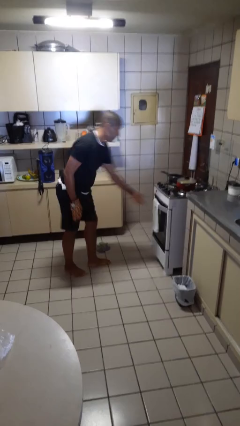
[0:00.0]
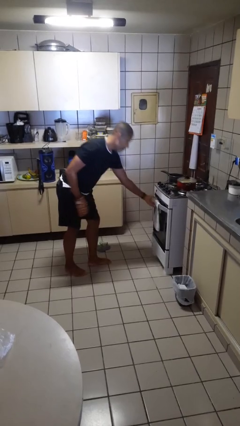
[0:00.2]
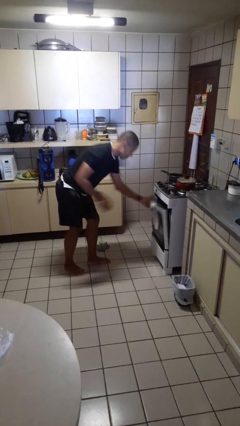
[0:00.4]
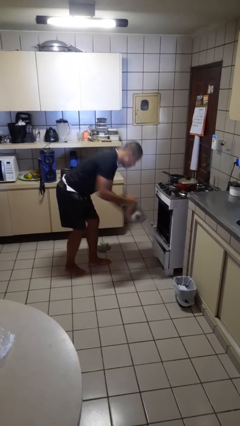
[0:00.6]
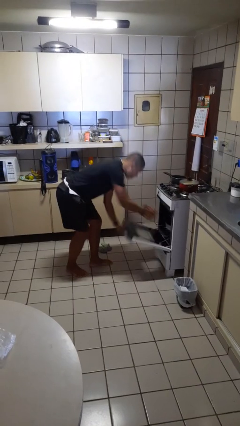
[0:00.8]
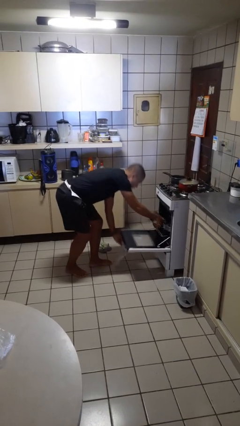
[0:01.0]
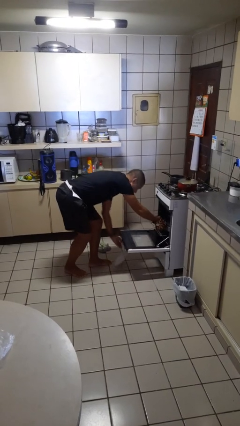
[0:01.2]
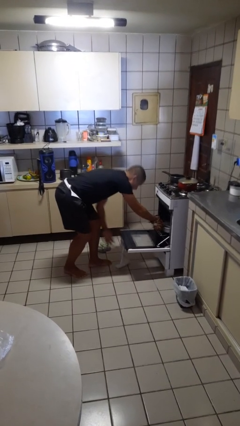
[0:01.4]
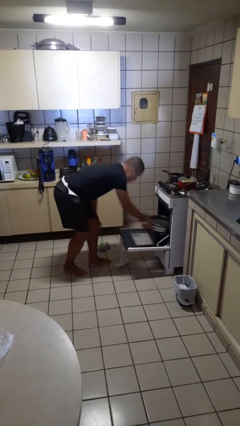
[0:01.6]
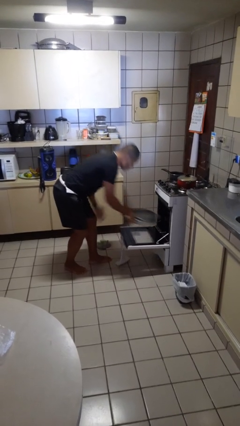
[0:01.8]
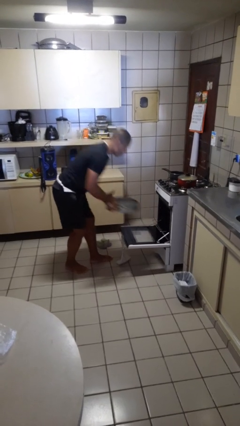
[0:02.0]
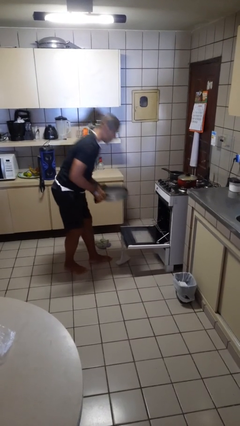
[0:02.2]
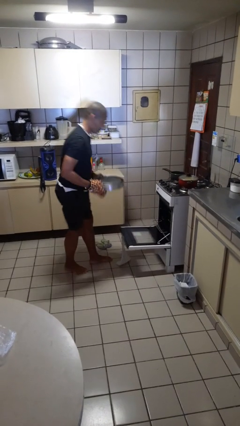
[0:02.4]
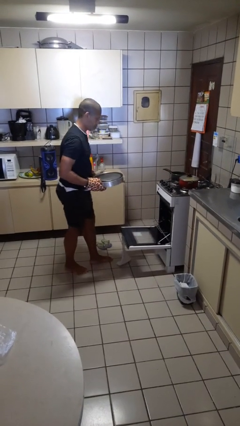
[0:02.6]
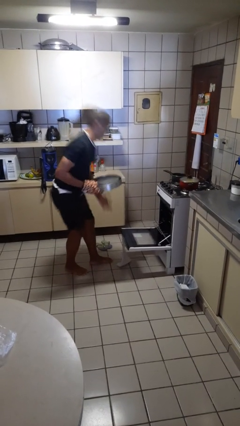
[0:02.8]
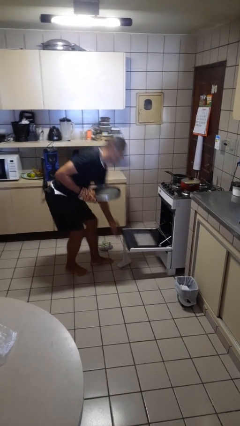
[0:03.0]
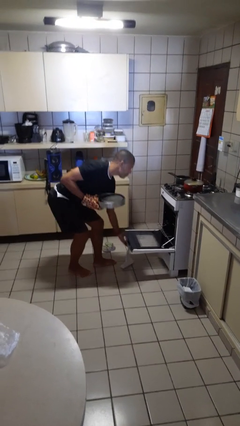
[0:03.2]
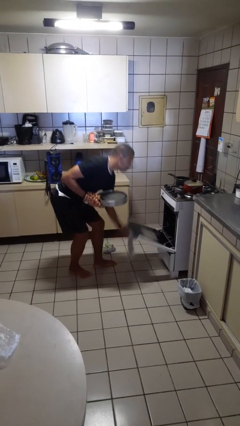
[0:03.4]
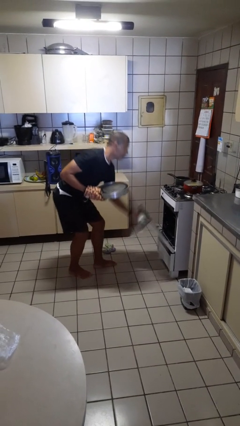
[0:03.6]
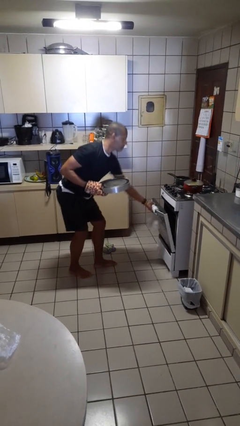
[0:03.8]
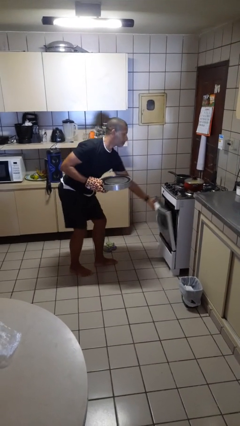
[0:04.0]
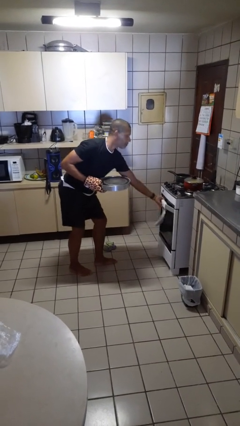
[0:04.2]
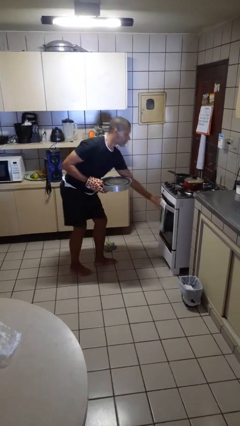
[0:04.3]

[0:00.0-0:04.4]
person takes object from oven

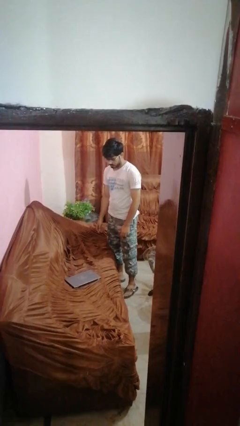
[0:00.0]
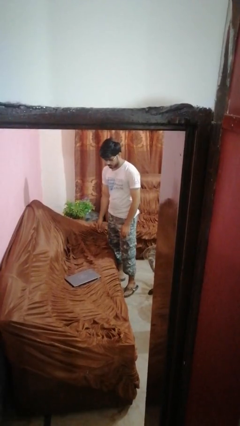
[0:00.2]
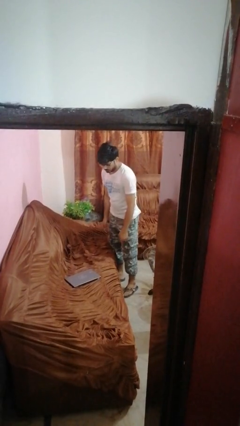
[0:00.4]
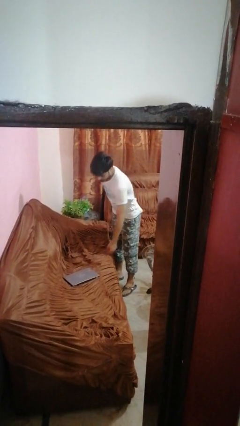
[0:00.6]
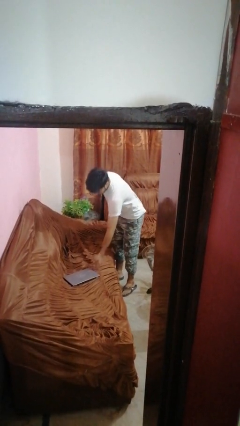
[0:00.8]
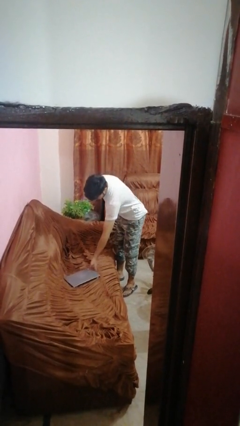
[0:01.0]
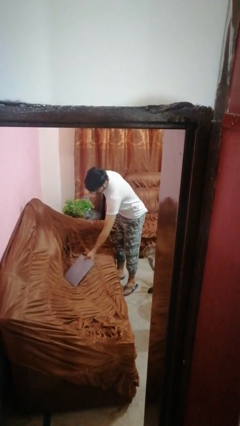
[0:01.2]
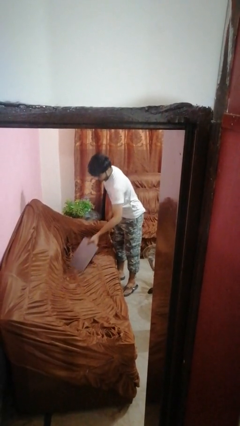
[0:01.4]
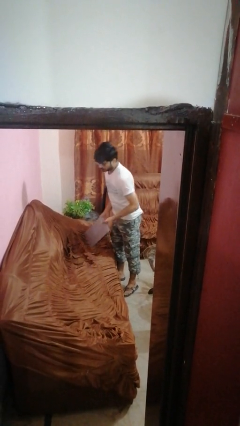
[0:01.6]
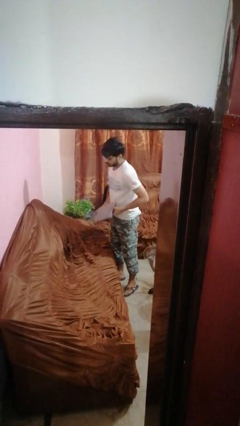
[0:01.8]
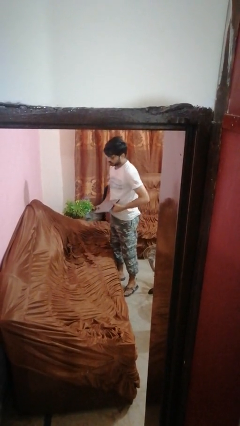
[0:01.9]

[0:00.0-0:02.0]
person picks up object from couch

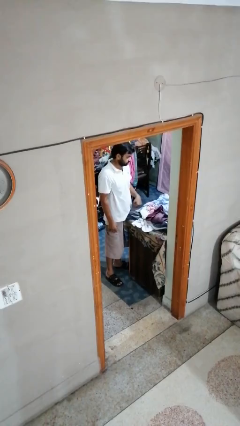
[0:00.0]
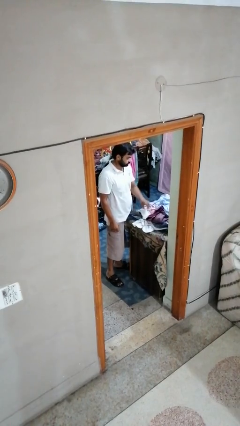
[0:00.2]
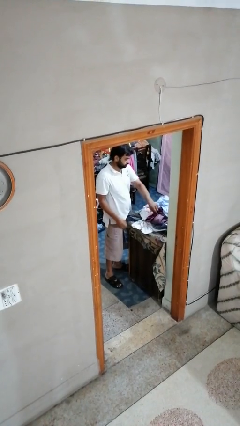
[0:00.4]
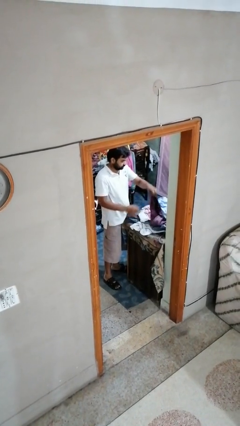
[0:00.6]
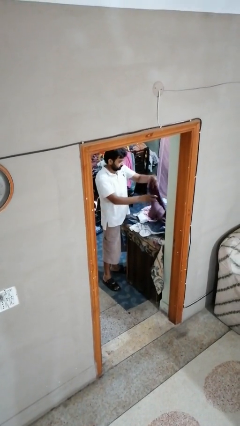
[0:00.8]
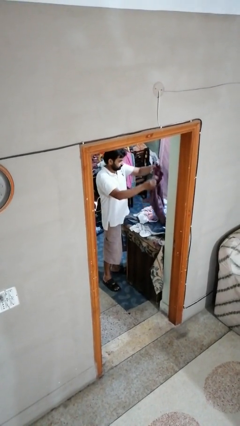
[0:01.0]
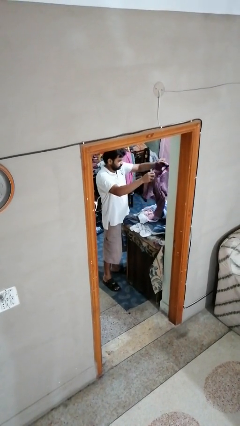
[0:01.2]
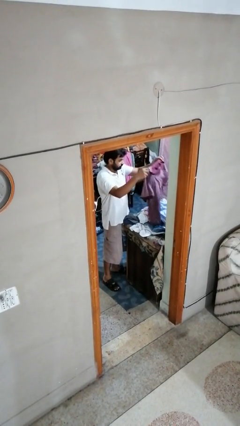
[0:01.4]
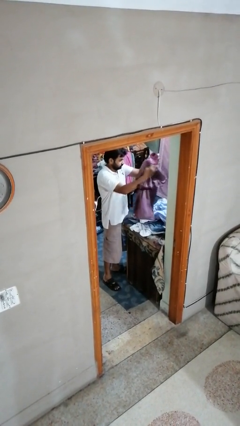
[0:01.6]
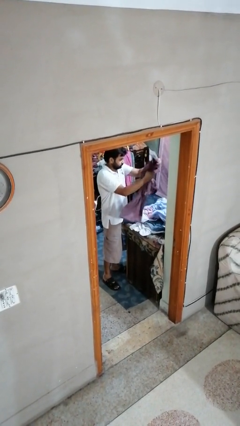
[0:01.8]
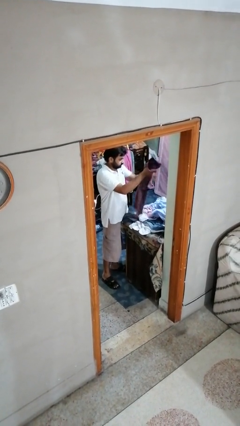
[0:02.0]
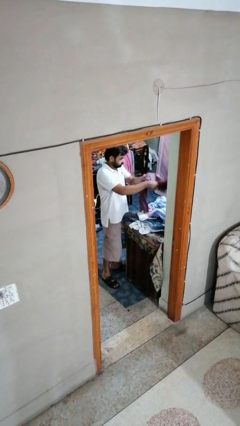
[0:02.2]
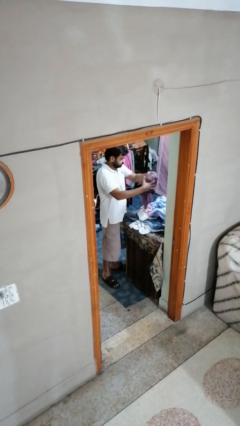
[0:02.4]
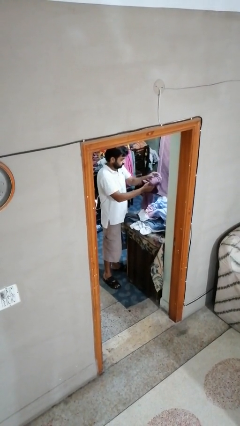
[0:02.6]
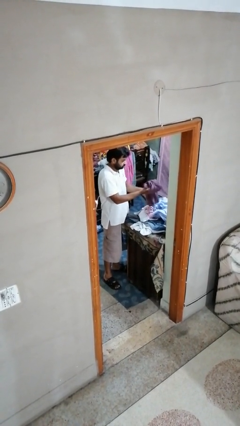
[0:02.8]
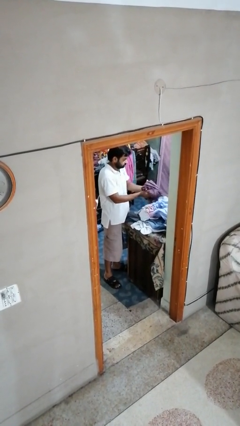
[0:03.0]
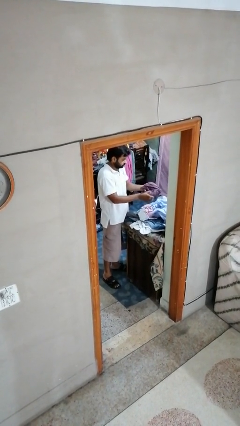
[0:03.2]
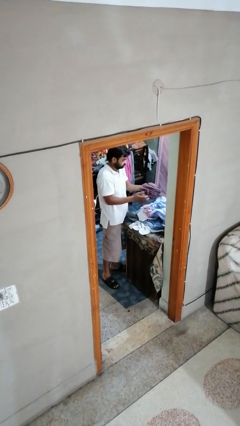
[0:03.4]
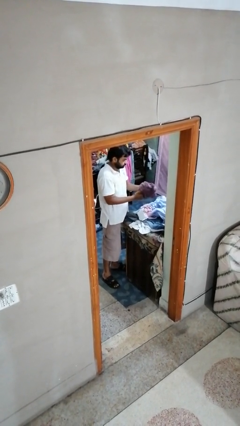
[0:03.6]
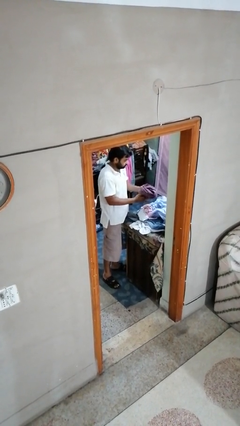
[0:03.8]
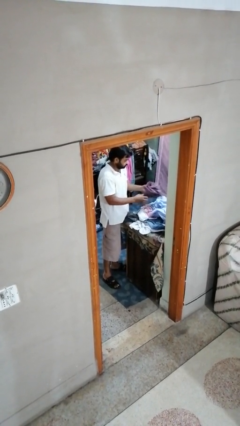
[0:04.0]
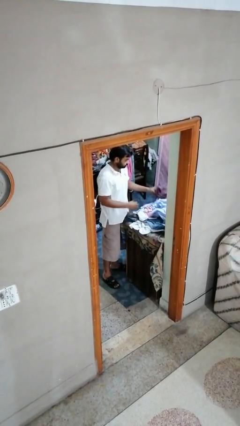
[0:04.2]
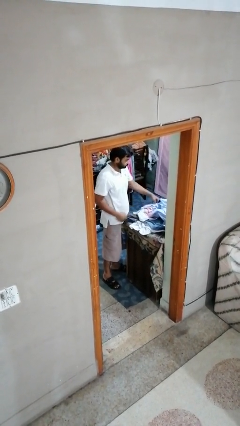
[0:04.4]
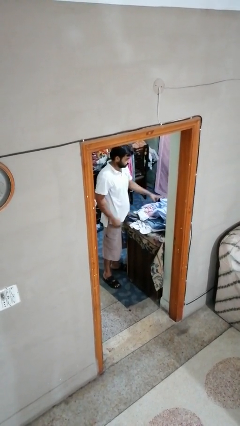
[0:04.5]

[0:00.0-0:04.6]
person folds shirt

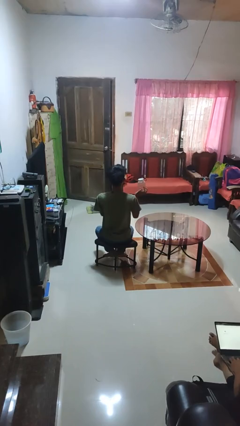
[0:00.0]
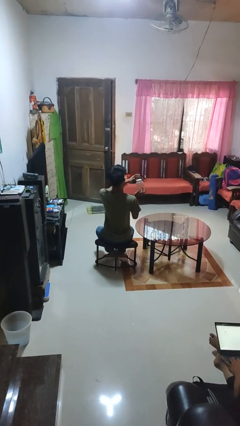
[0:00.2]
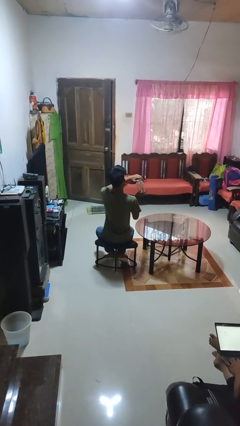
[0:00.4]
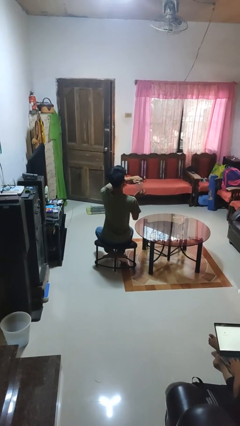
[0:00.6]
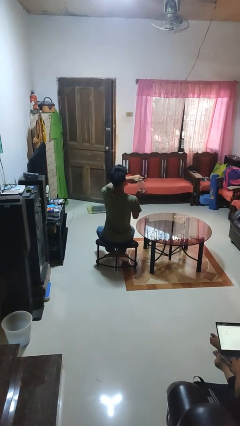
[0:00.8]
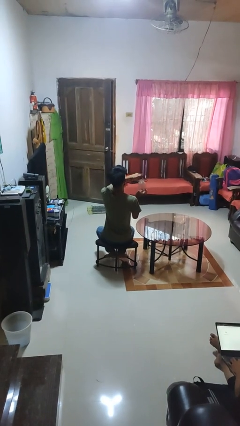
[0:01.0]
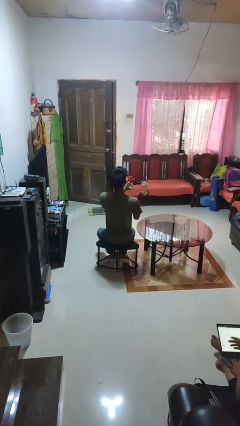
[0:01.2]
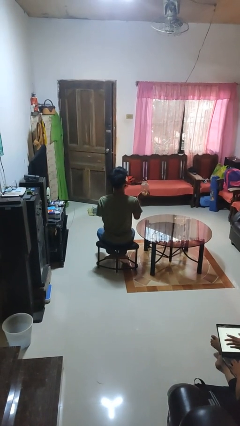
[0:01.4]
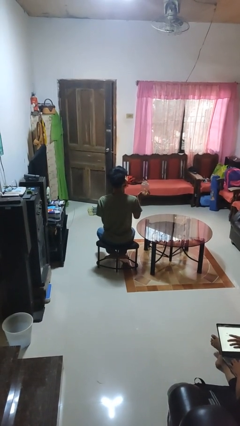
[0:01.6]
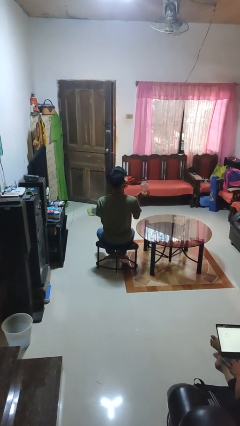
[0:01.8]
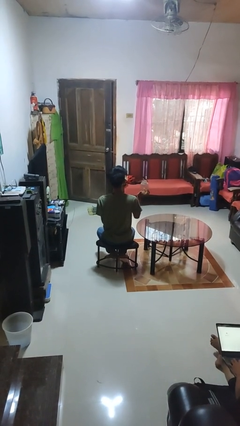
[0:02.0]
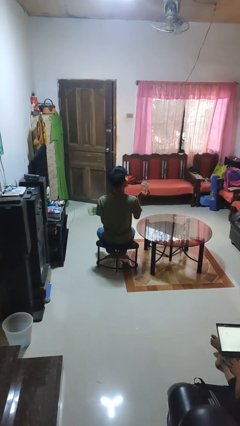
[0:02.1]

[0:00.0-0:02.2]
person opens jar

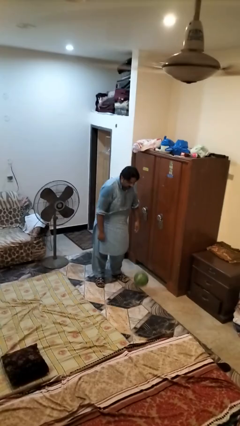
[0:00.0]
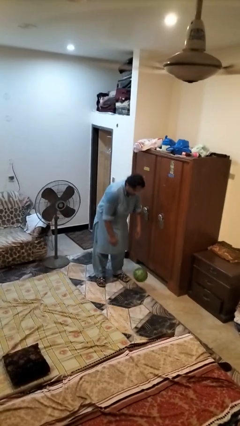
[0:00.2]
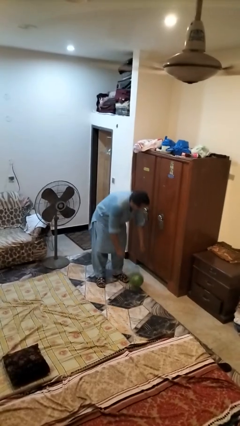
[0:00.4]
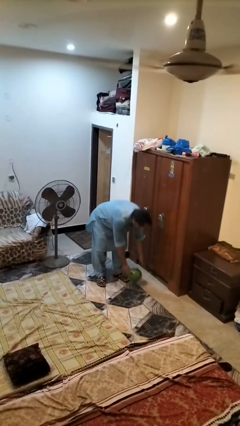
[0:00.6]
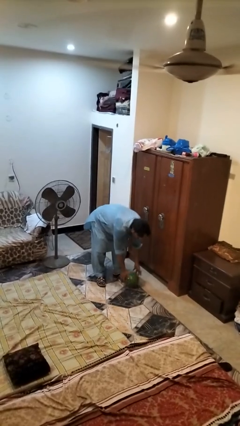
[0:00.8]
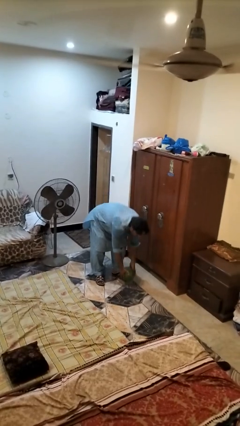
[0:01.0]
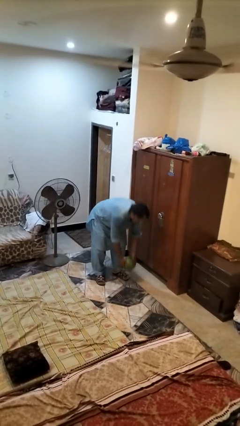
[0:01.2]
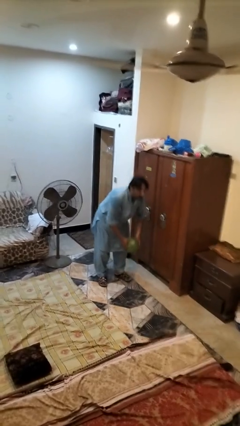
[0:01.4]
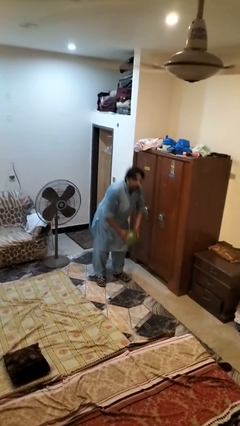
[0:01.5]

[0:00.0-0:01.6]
person catches dropped object

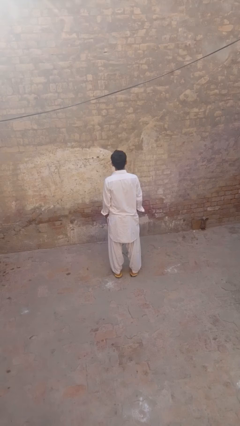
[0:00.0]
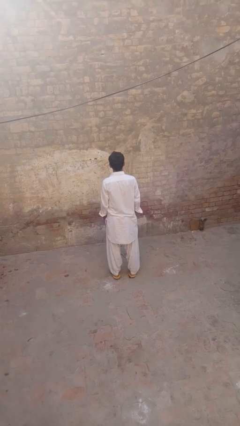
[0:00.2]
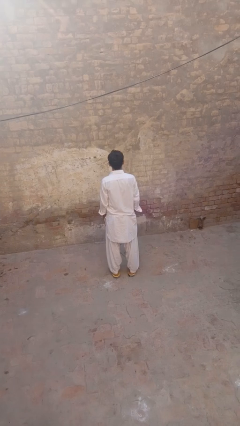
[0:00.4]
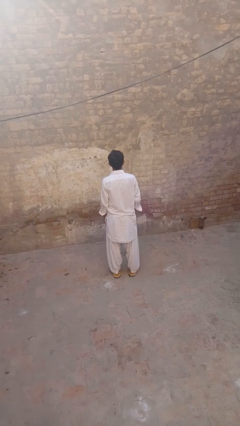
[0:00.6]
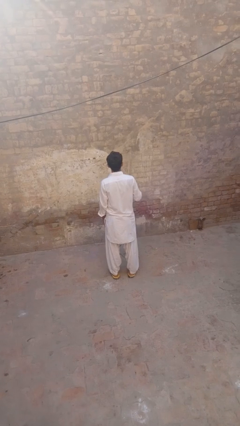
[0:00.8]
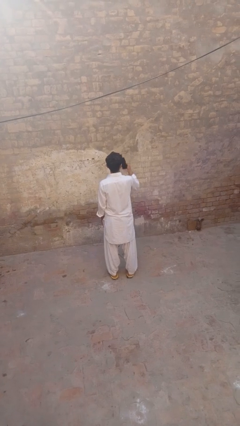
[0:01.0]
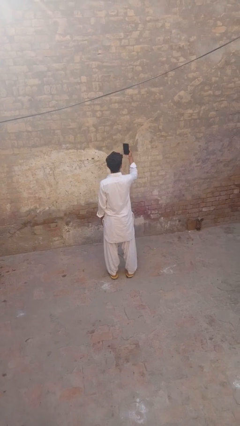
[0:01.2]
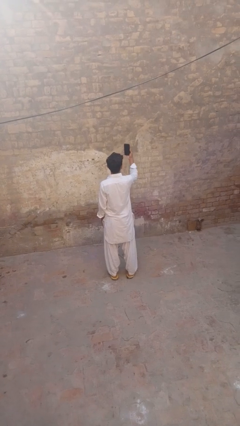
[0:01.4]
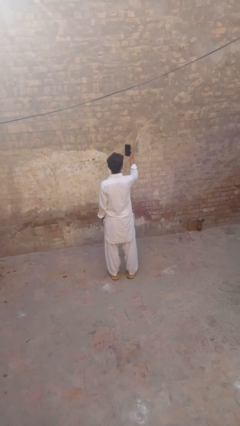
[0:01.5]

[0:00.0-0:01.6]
person takes selfie

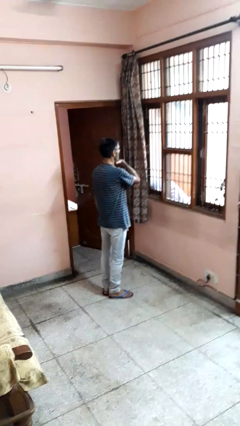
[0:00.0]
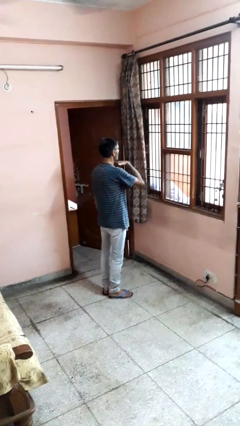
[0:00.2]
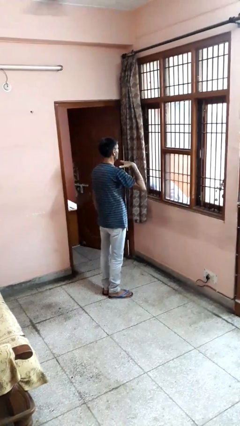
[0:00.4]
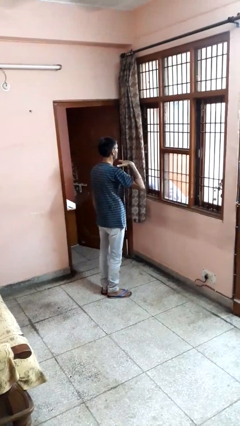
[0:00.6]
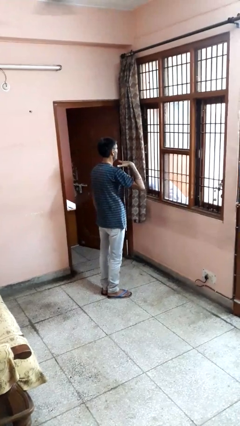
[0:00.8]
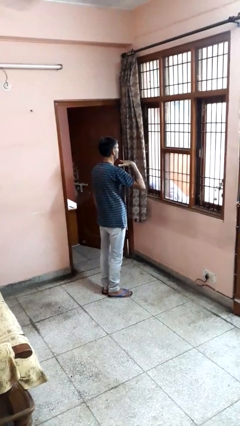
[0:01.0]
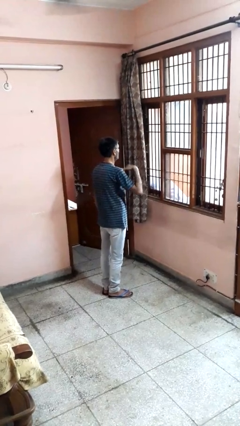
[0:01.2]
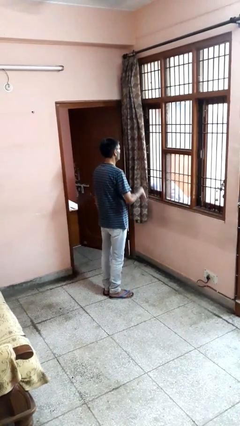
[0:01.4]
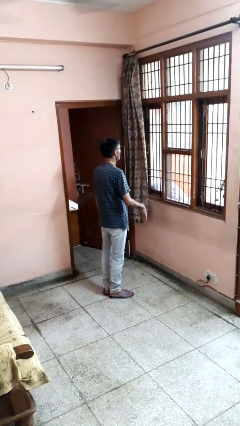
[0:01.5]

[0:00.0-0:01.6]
person gestures cut
